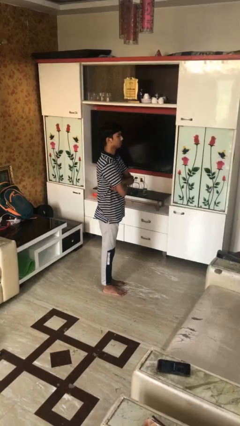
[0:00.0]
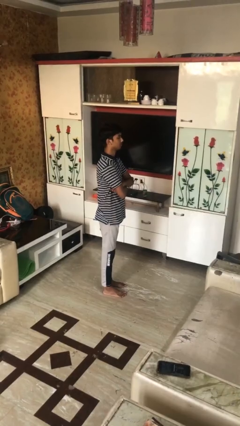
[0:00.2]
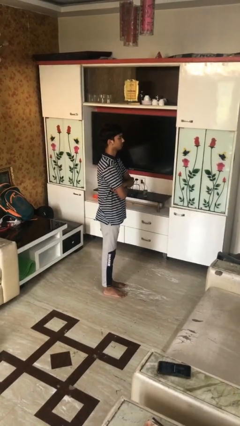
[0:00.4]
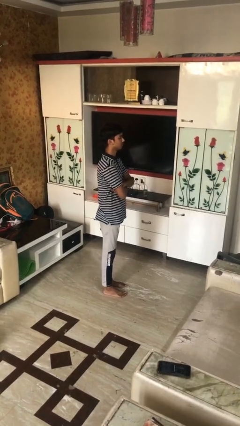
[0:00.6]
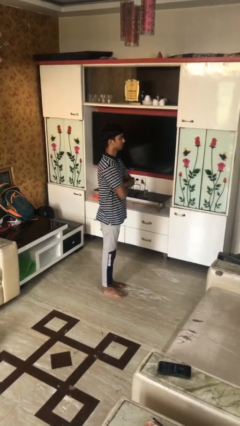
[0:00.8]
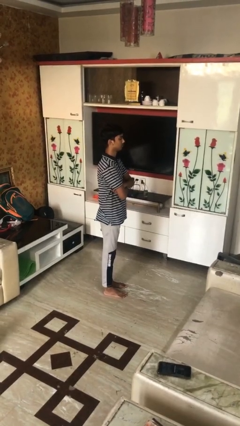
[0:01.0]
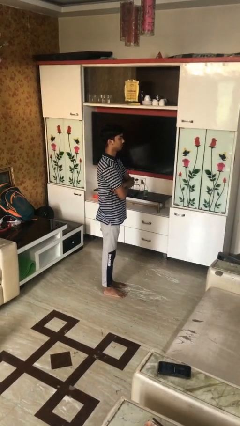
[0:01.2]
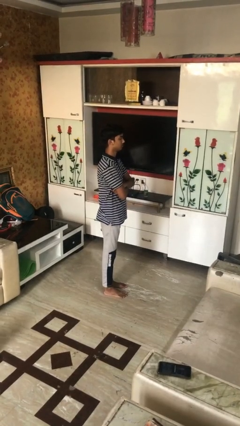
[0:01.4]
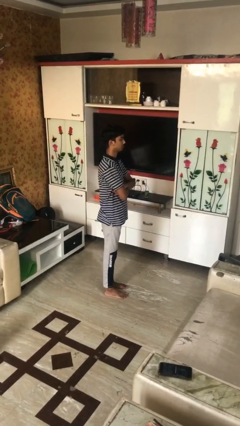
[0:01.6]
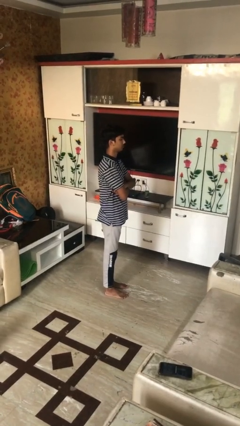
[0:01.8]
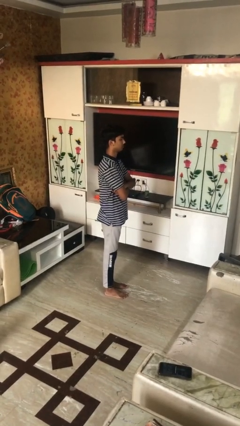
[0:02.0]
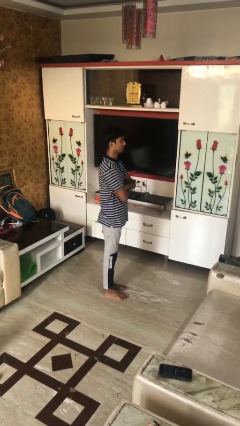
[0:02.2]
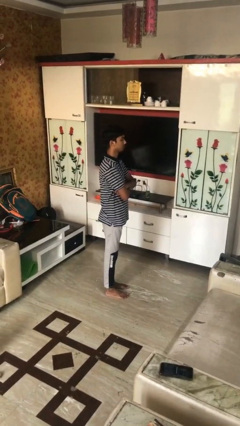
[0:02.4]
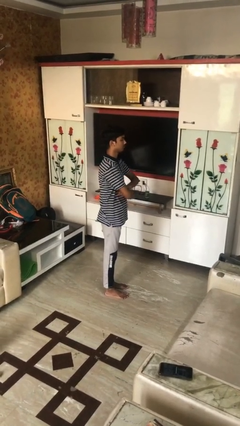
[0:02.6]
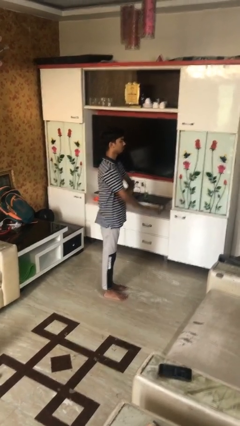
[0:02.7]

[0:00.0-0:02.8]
person crosses arms

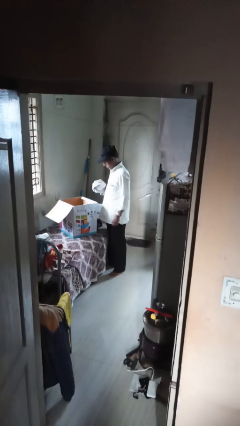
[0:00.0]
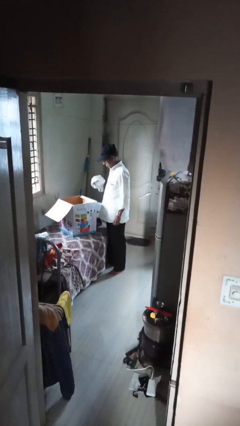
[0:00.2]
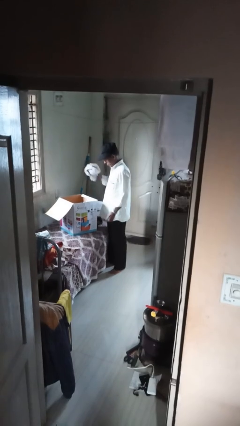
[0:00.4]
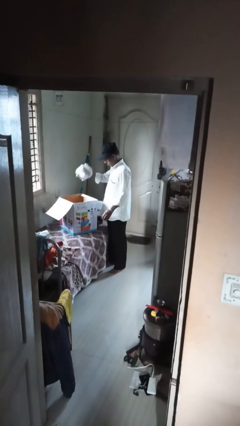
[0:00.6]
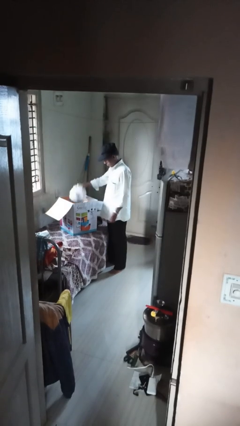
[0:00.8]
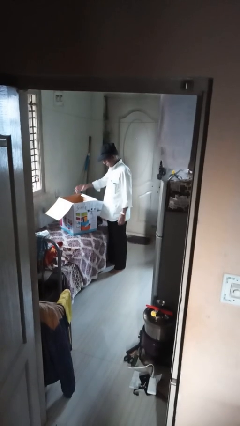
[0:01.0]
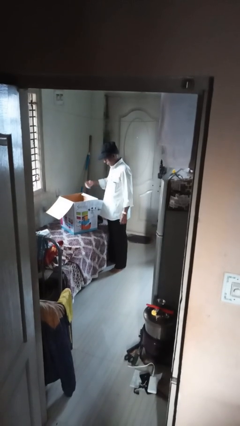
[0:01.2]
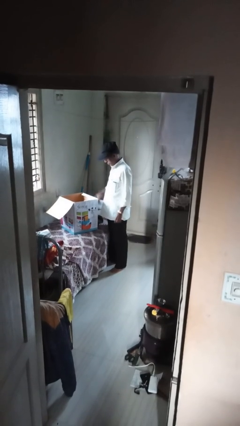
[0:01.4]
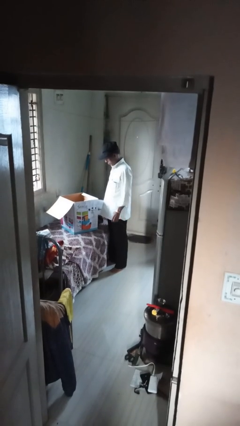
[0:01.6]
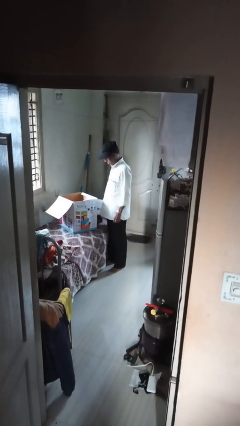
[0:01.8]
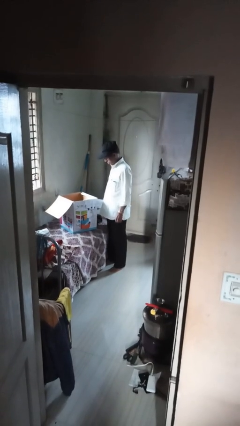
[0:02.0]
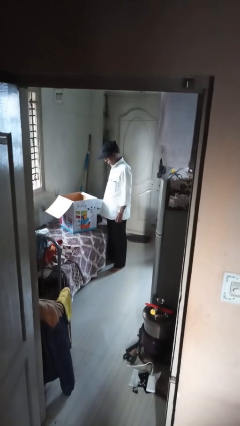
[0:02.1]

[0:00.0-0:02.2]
person puts object into box

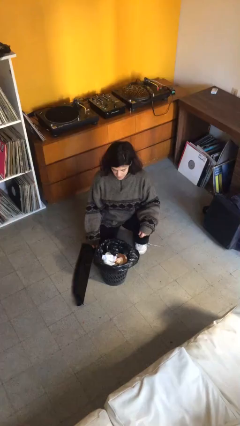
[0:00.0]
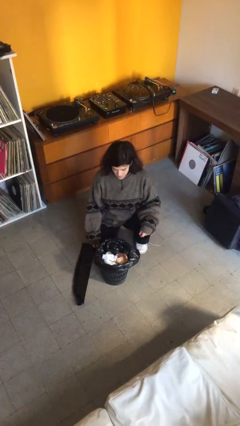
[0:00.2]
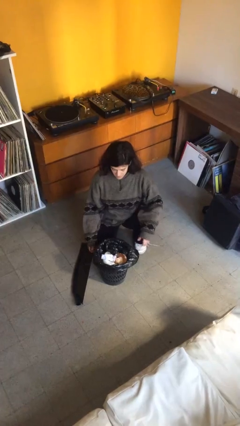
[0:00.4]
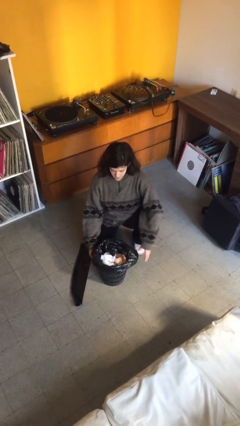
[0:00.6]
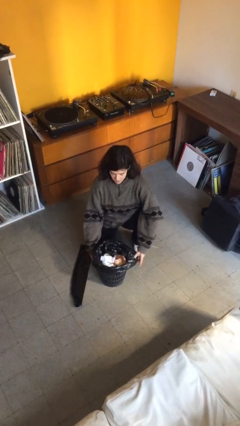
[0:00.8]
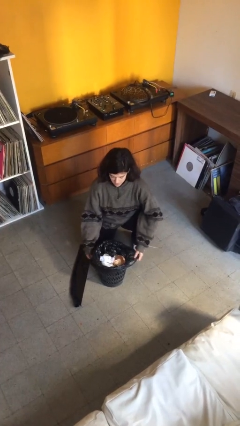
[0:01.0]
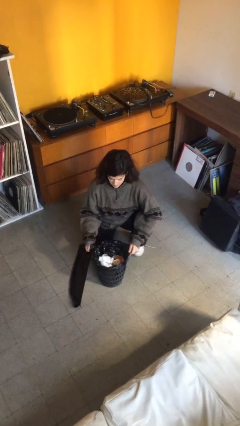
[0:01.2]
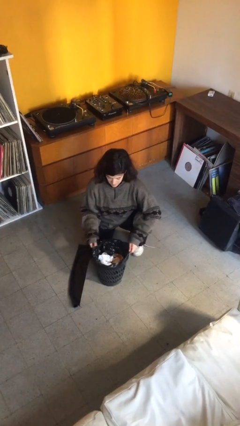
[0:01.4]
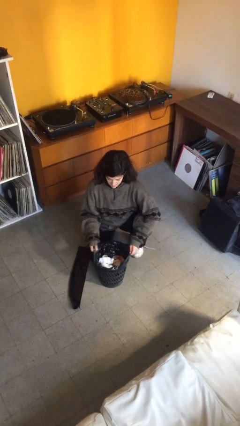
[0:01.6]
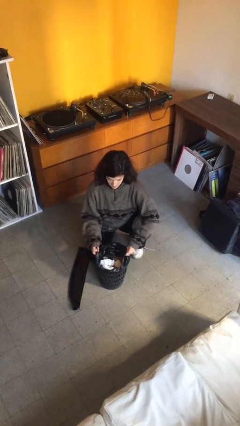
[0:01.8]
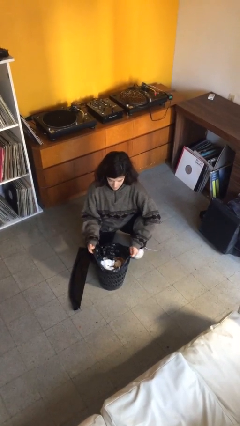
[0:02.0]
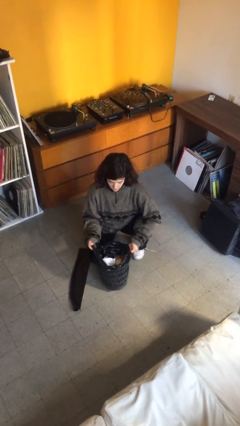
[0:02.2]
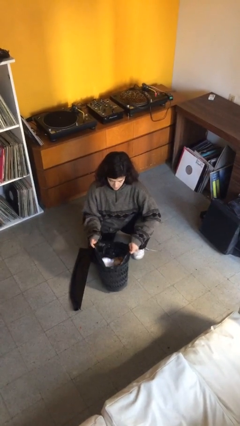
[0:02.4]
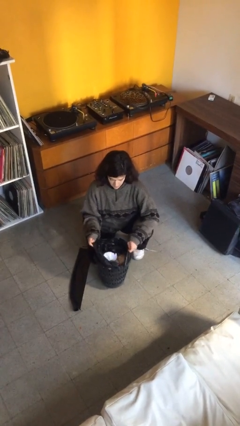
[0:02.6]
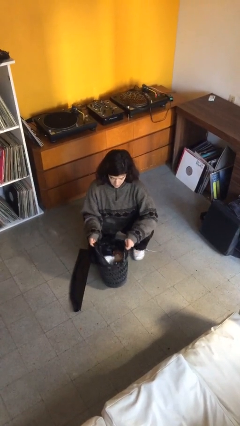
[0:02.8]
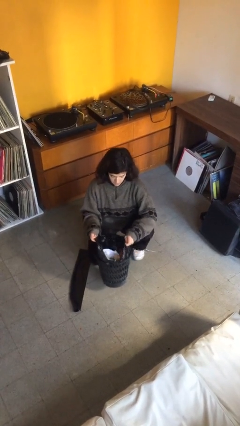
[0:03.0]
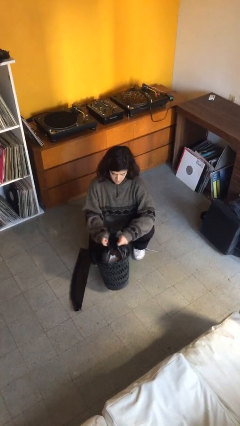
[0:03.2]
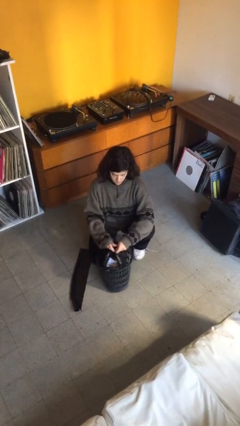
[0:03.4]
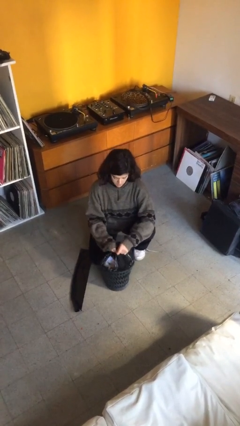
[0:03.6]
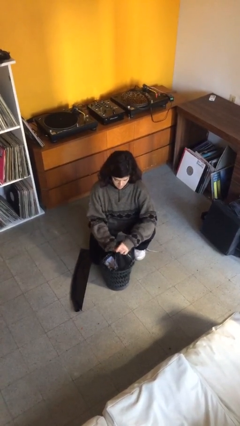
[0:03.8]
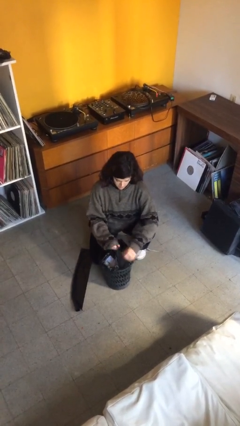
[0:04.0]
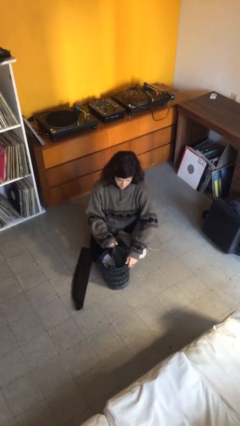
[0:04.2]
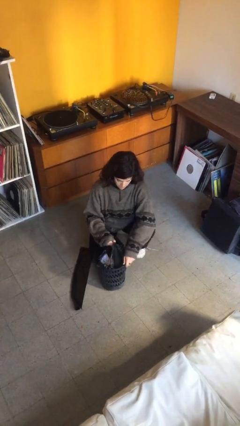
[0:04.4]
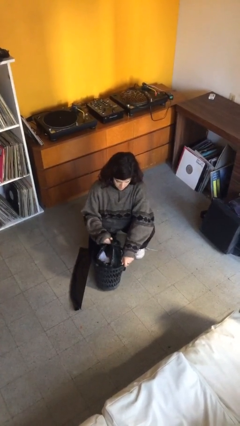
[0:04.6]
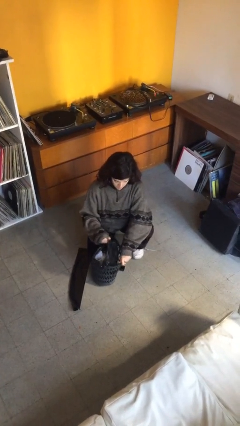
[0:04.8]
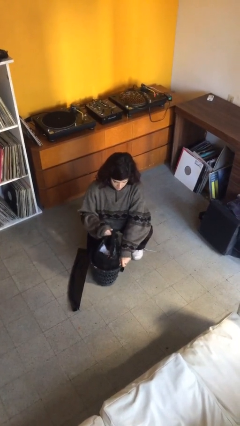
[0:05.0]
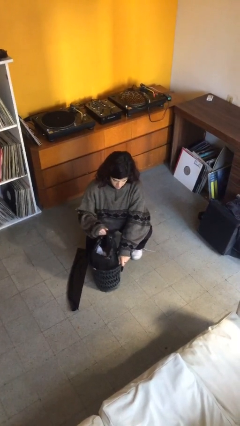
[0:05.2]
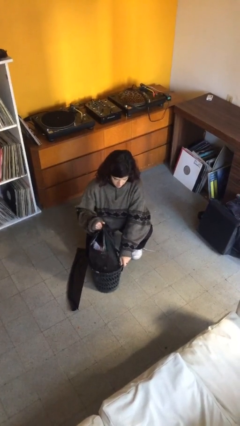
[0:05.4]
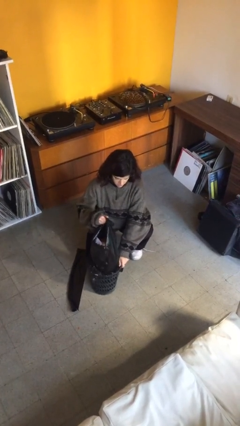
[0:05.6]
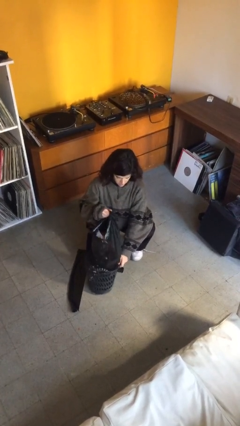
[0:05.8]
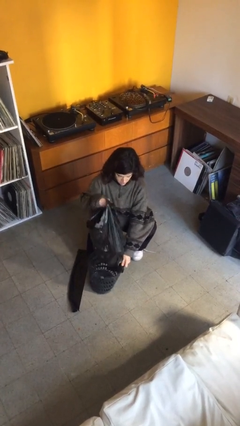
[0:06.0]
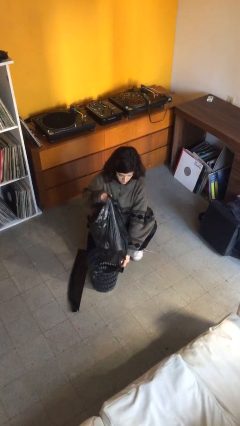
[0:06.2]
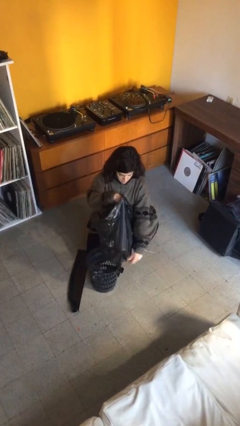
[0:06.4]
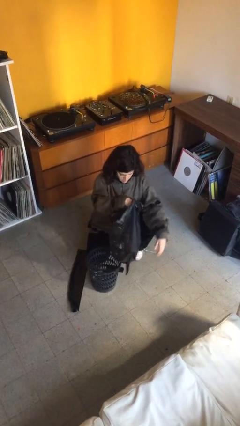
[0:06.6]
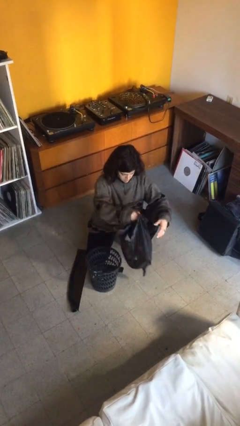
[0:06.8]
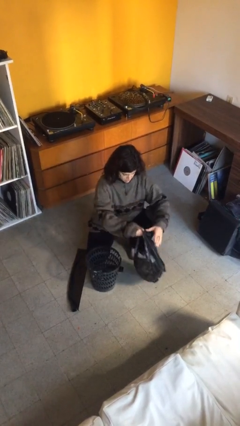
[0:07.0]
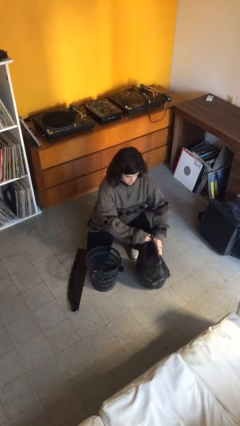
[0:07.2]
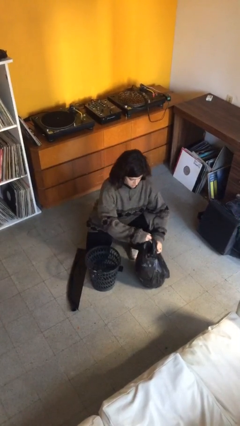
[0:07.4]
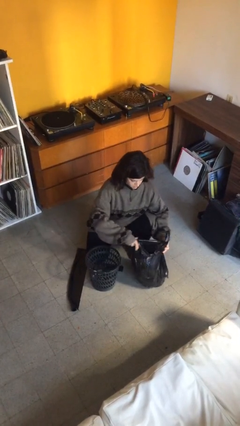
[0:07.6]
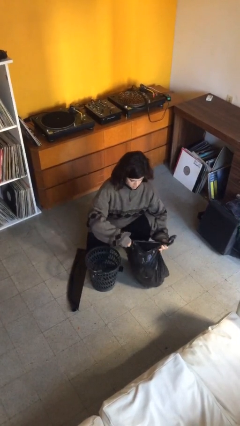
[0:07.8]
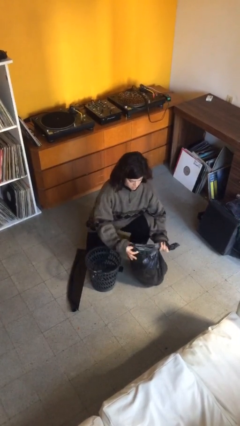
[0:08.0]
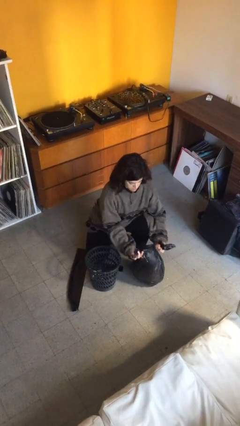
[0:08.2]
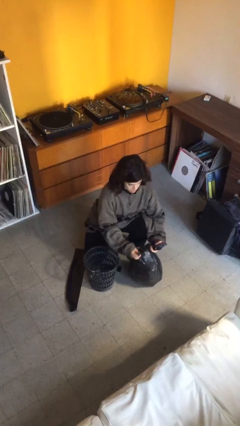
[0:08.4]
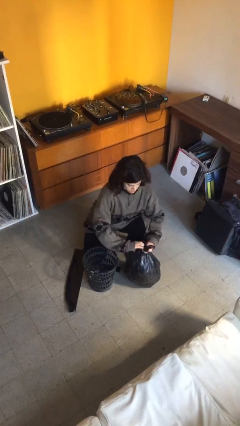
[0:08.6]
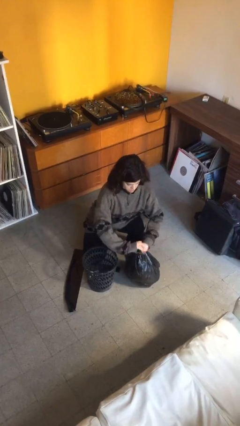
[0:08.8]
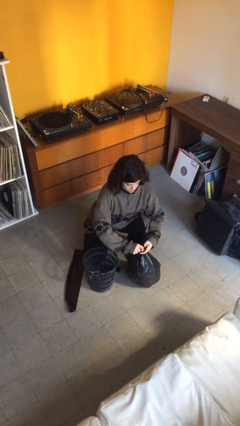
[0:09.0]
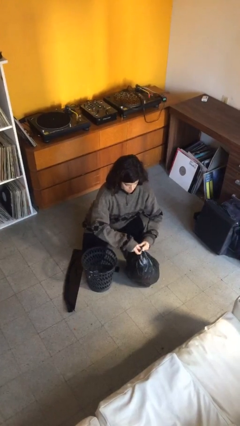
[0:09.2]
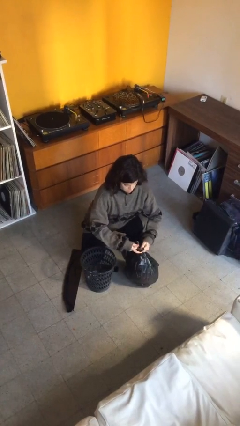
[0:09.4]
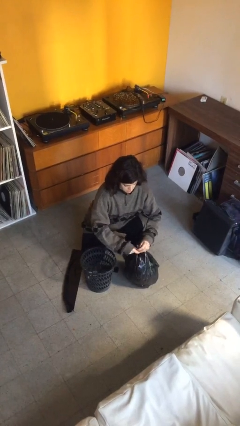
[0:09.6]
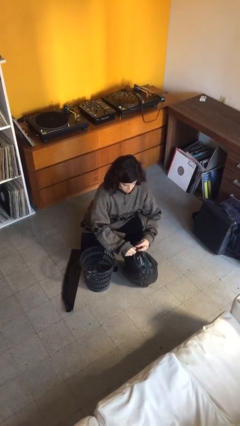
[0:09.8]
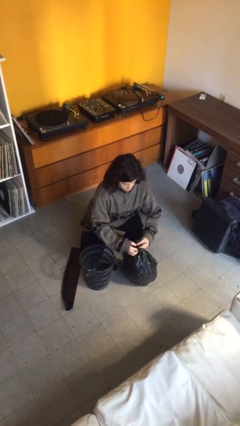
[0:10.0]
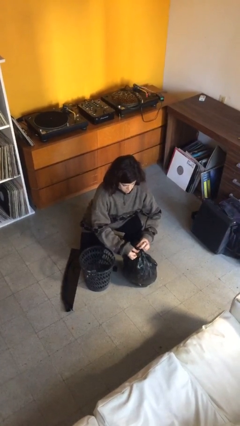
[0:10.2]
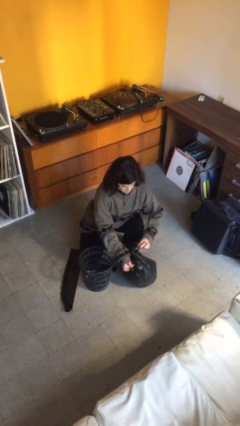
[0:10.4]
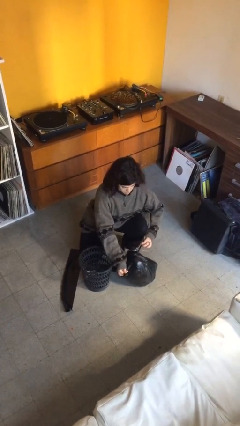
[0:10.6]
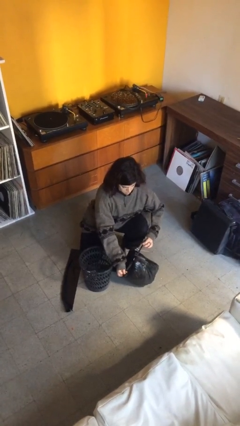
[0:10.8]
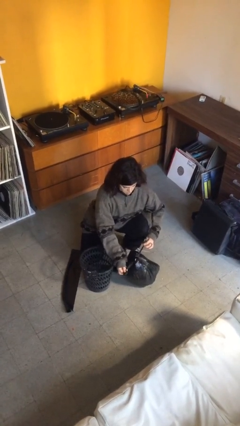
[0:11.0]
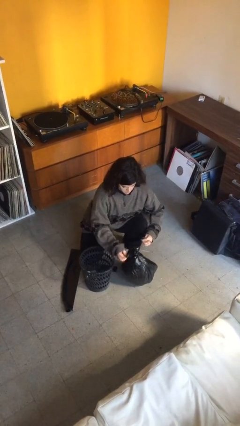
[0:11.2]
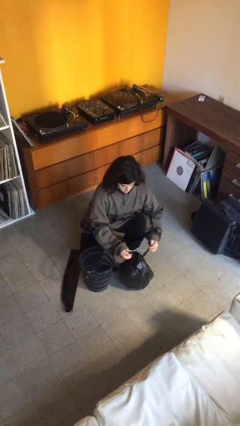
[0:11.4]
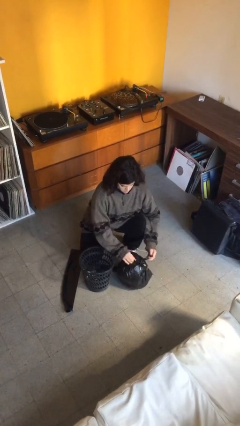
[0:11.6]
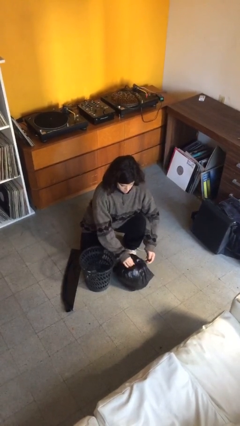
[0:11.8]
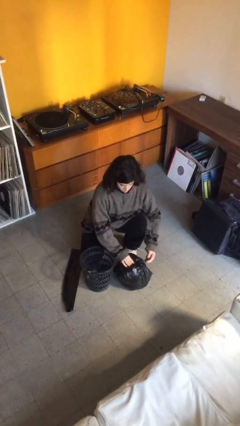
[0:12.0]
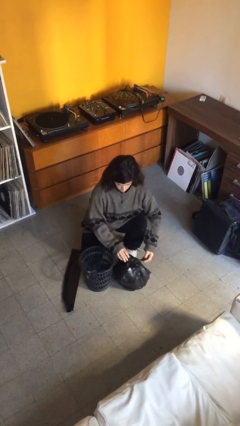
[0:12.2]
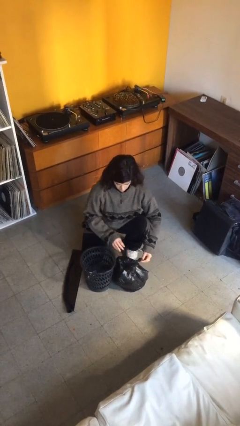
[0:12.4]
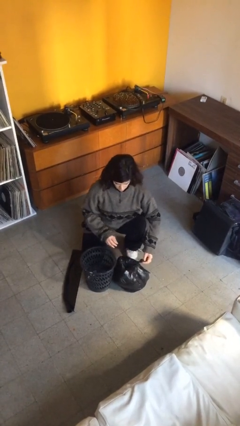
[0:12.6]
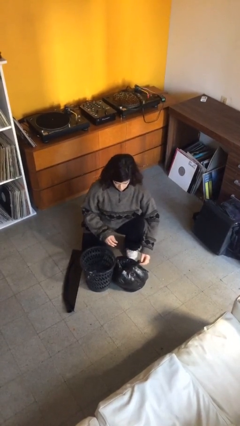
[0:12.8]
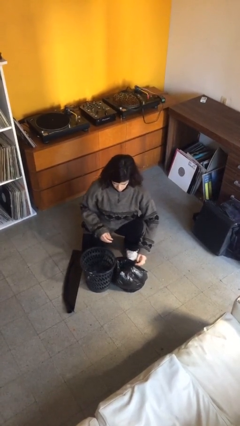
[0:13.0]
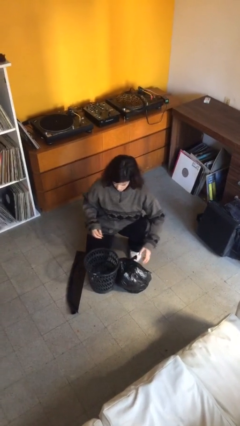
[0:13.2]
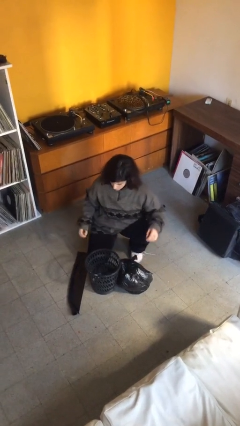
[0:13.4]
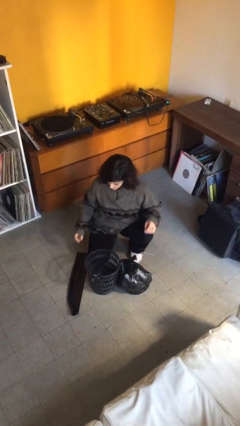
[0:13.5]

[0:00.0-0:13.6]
person removes trashbag from trashcan
